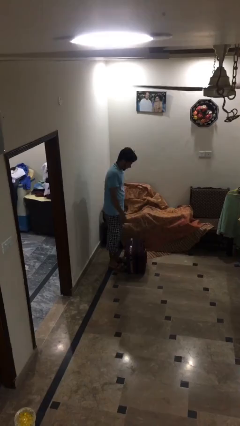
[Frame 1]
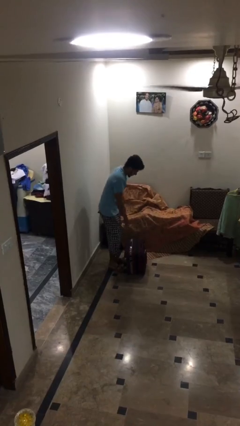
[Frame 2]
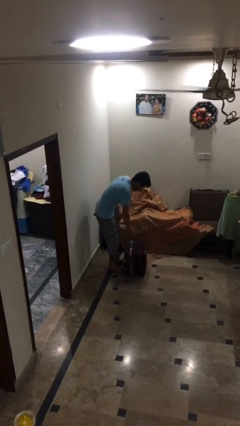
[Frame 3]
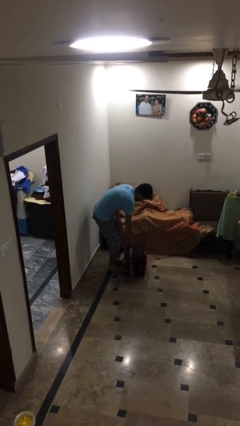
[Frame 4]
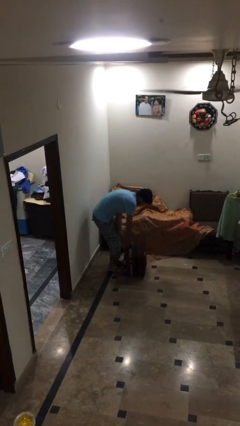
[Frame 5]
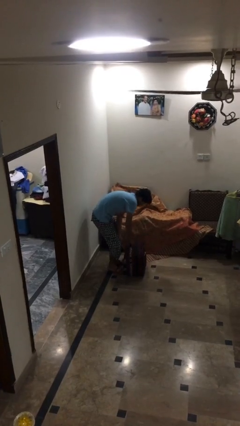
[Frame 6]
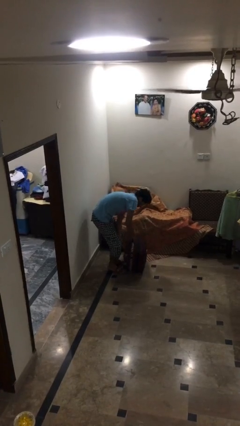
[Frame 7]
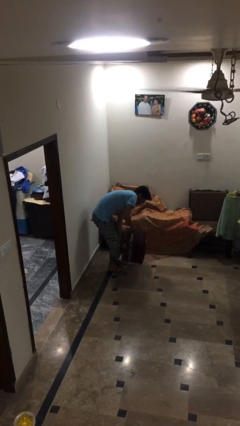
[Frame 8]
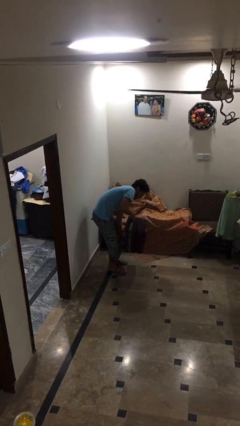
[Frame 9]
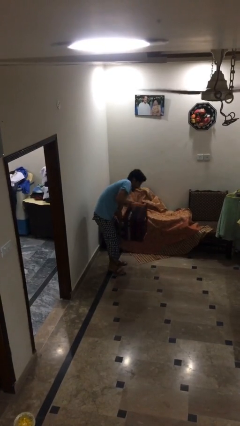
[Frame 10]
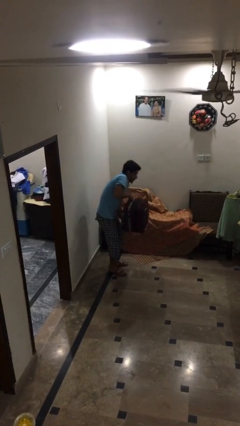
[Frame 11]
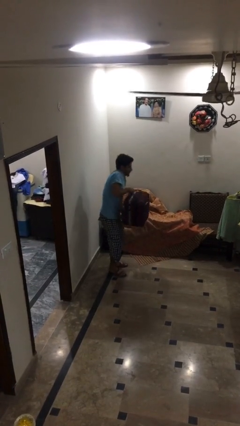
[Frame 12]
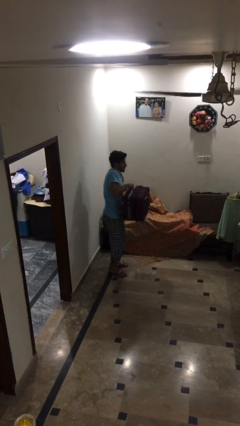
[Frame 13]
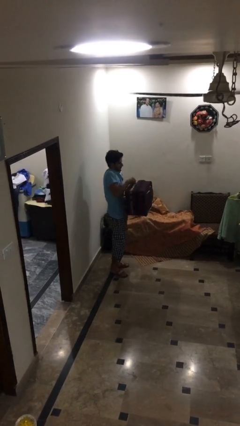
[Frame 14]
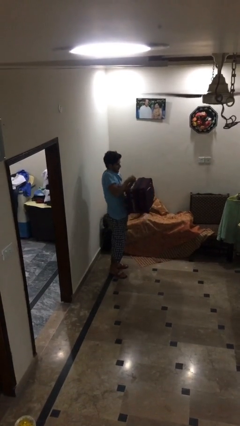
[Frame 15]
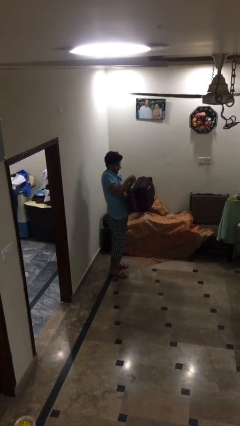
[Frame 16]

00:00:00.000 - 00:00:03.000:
person picks up object from floor

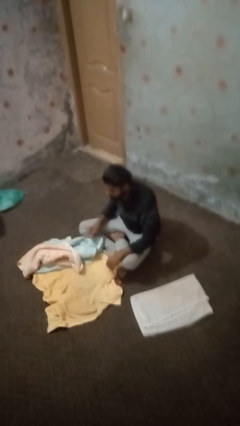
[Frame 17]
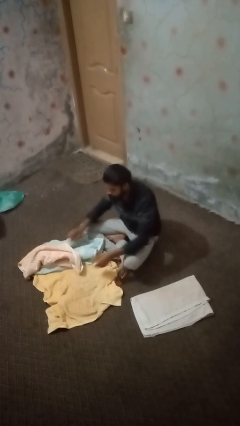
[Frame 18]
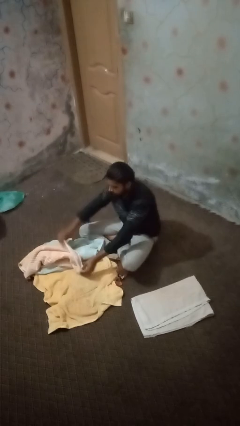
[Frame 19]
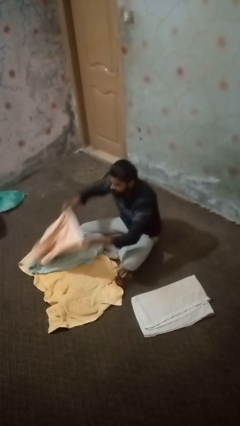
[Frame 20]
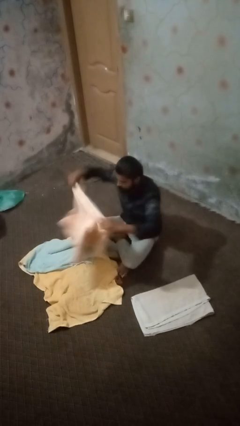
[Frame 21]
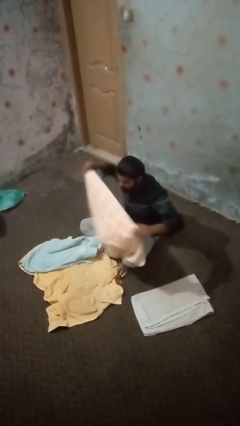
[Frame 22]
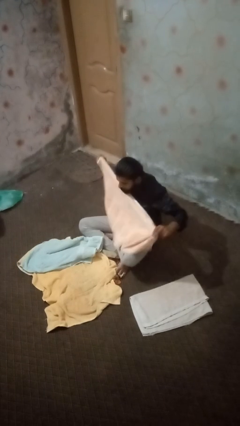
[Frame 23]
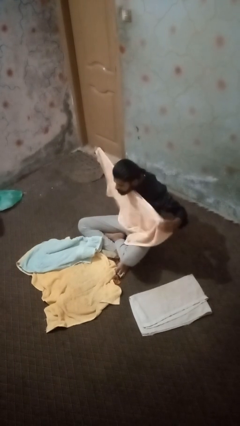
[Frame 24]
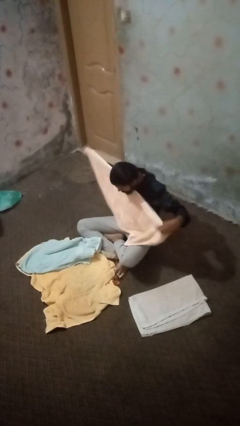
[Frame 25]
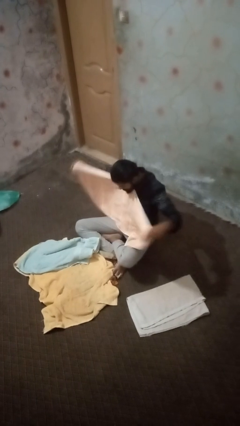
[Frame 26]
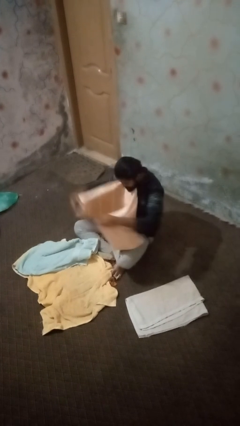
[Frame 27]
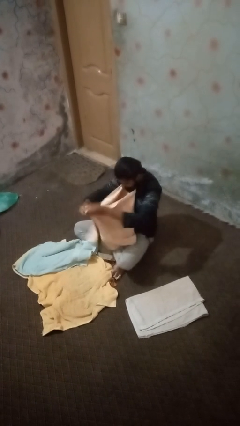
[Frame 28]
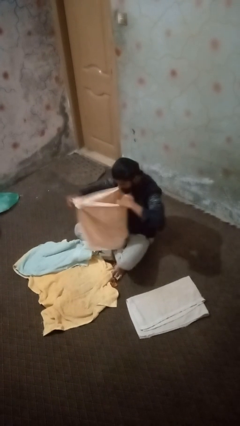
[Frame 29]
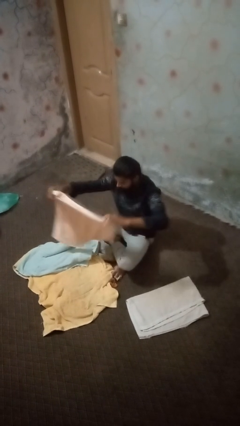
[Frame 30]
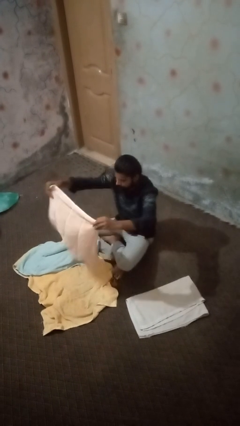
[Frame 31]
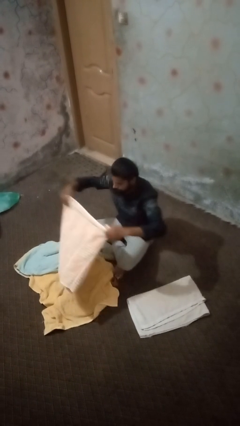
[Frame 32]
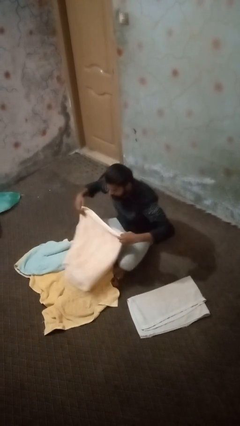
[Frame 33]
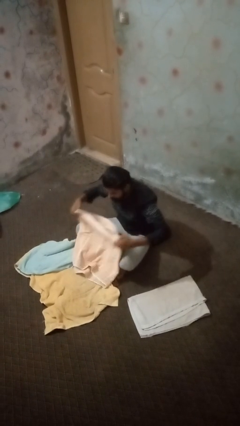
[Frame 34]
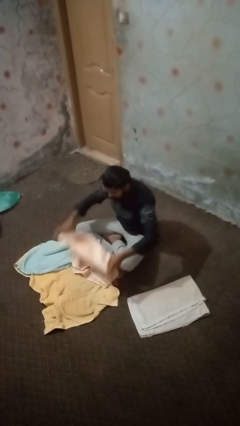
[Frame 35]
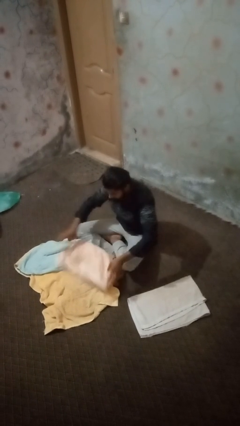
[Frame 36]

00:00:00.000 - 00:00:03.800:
person folds towel

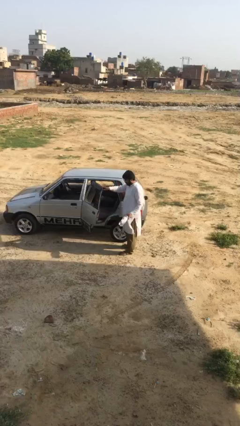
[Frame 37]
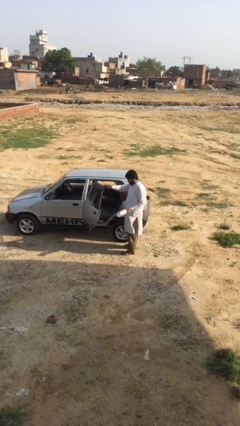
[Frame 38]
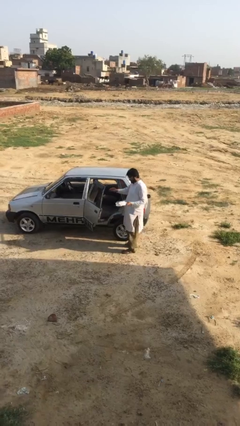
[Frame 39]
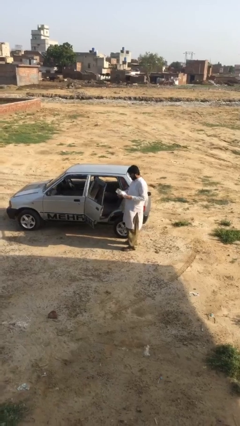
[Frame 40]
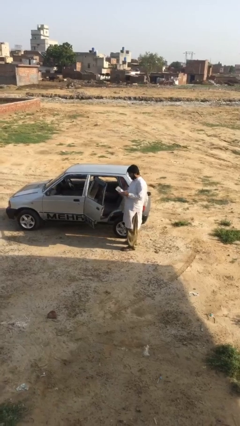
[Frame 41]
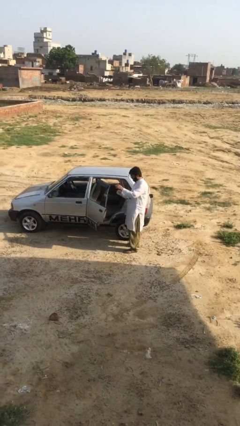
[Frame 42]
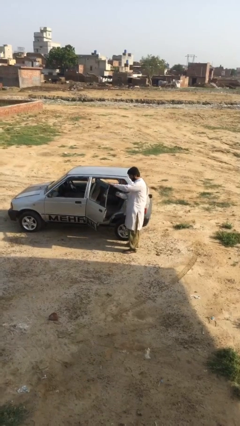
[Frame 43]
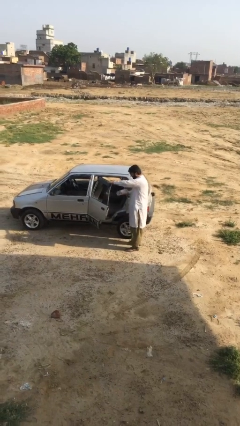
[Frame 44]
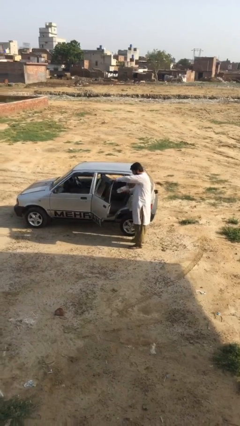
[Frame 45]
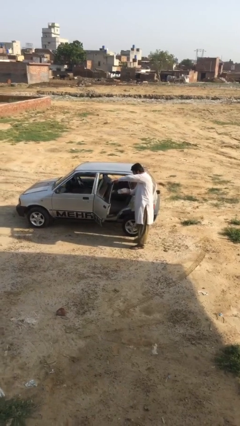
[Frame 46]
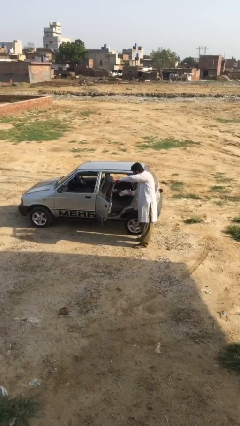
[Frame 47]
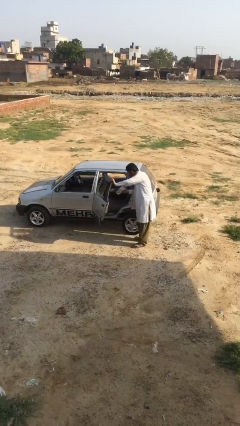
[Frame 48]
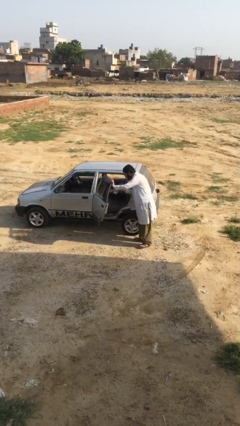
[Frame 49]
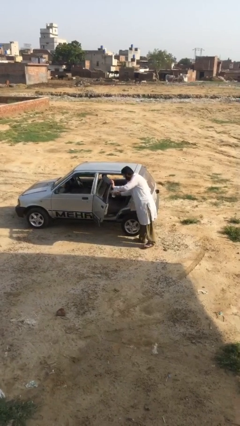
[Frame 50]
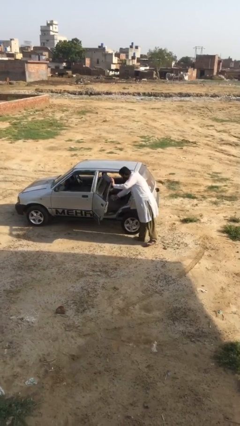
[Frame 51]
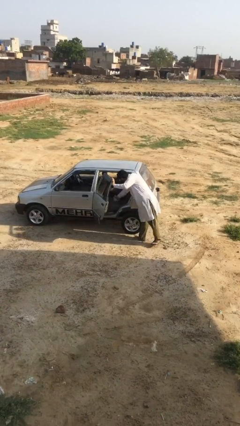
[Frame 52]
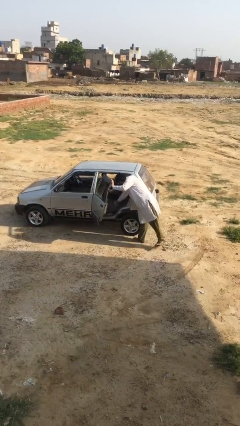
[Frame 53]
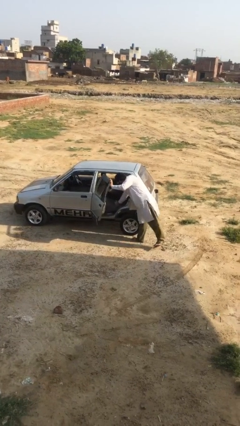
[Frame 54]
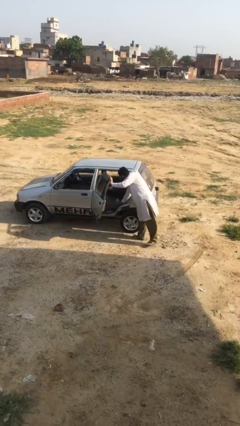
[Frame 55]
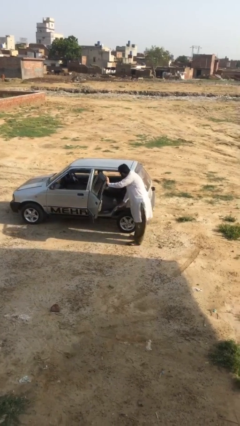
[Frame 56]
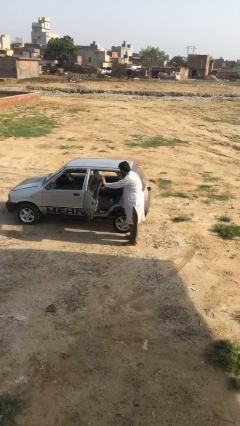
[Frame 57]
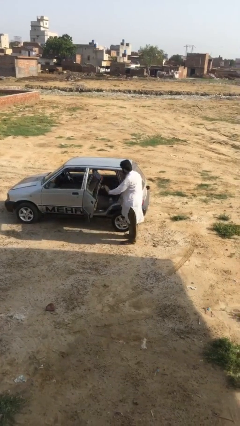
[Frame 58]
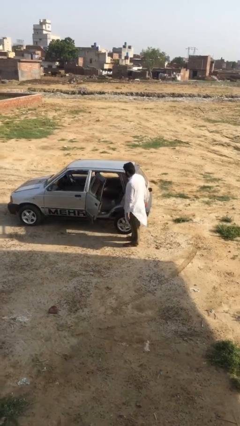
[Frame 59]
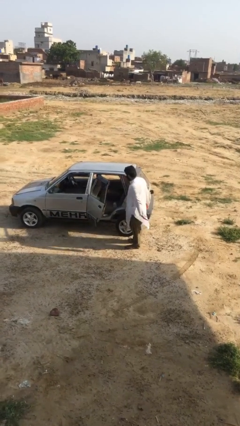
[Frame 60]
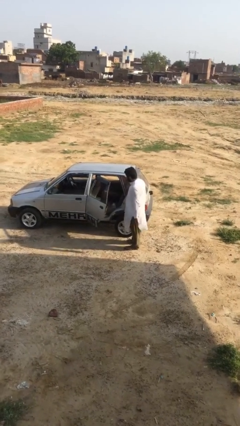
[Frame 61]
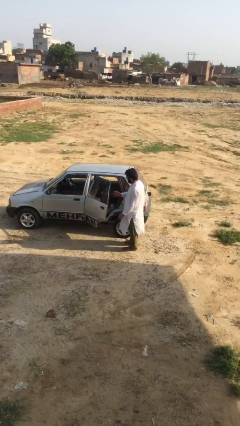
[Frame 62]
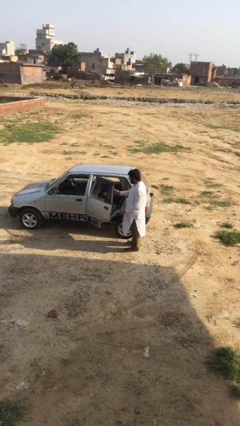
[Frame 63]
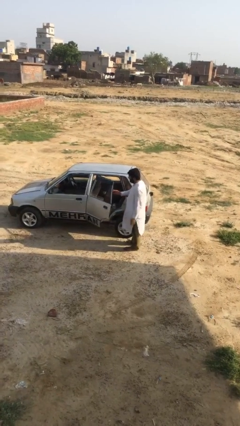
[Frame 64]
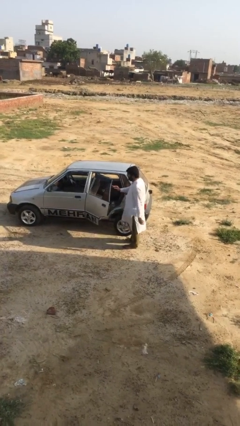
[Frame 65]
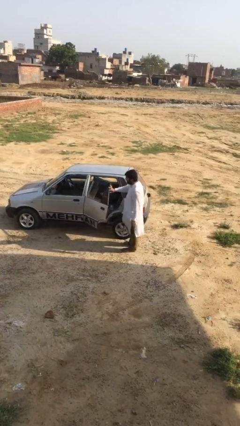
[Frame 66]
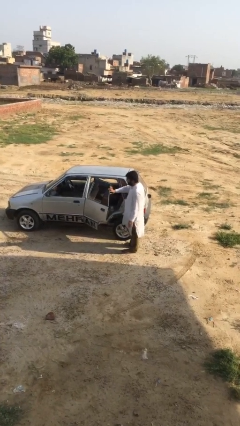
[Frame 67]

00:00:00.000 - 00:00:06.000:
person loads car

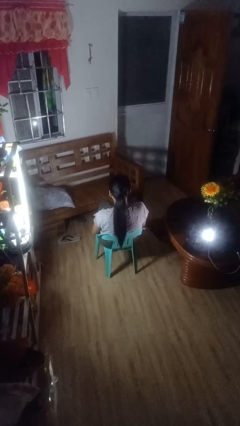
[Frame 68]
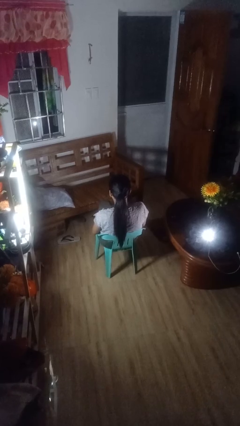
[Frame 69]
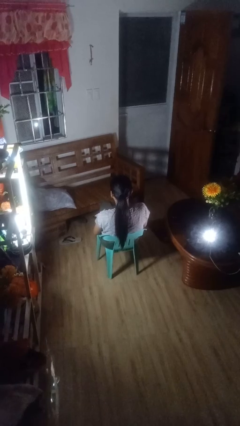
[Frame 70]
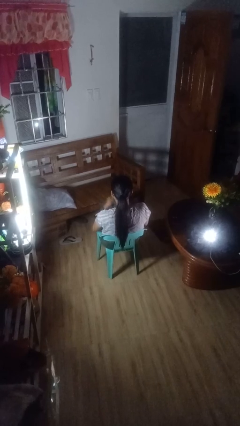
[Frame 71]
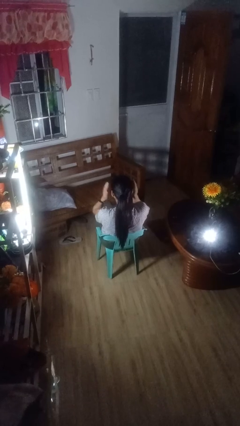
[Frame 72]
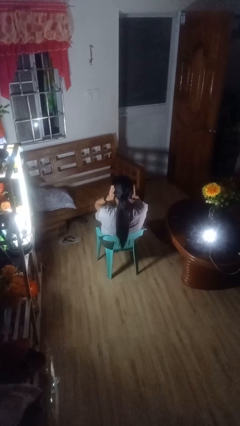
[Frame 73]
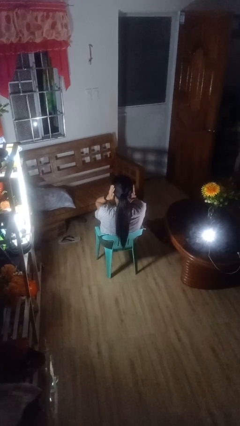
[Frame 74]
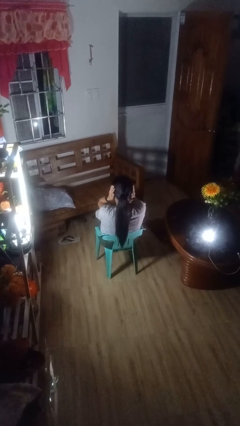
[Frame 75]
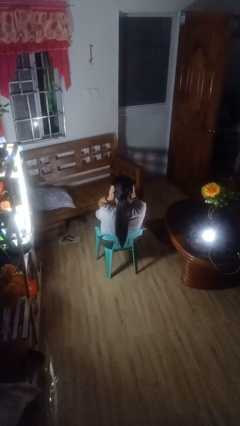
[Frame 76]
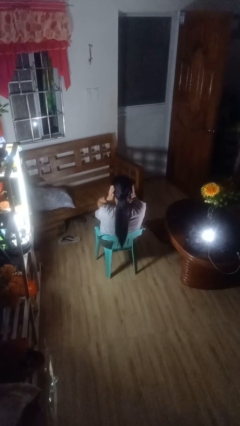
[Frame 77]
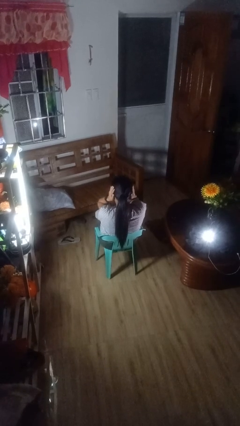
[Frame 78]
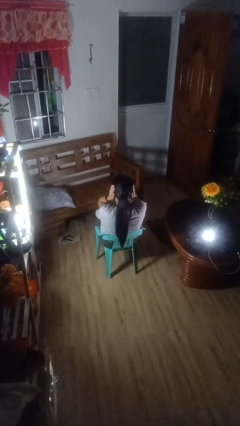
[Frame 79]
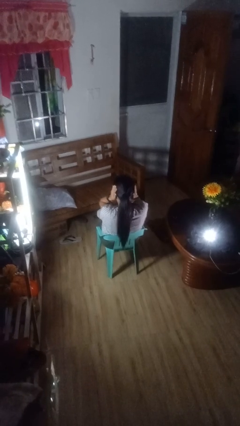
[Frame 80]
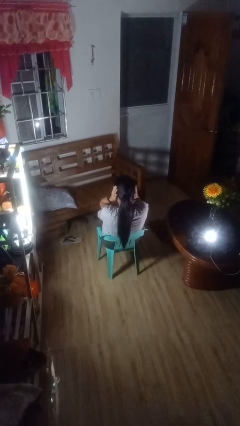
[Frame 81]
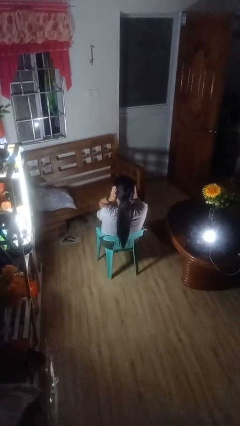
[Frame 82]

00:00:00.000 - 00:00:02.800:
person puts fingers in ear

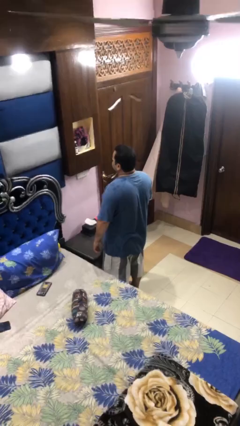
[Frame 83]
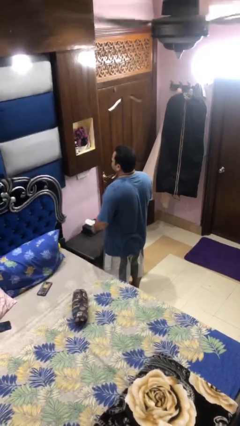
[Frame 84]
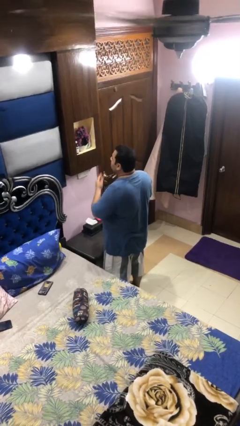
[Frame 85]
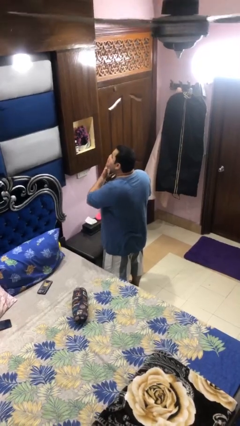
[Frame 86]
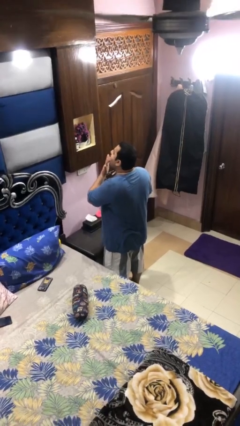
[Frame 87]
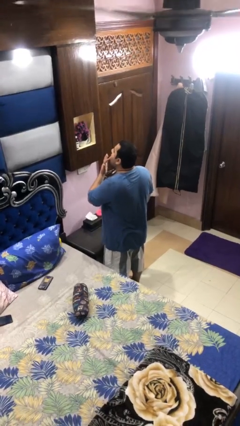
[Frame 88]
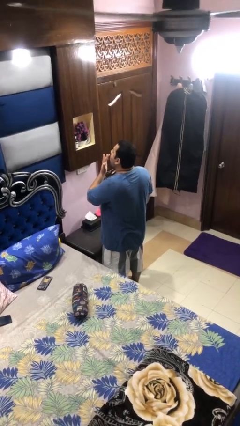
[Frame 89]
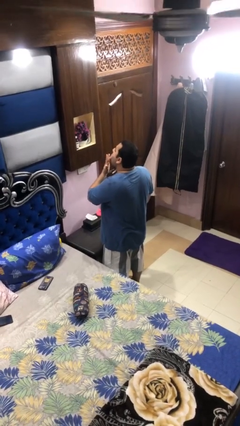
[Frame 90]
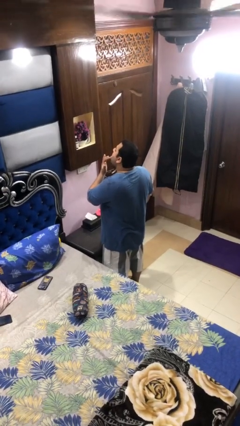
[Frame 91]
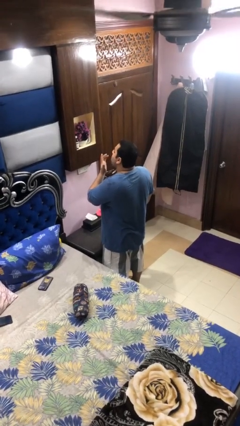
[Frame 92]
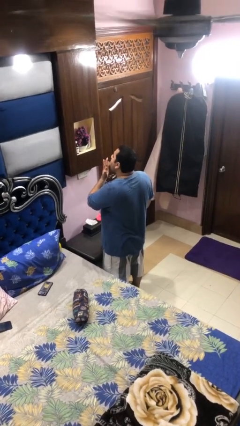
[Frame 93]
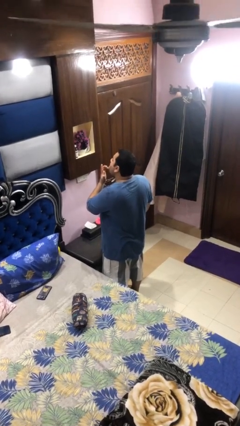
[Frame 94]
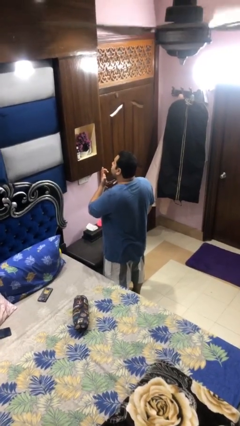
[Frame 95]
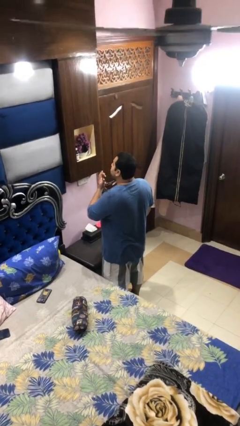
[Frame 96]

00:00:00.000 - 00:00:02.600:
person licks fingers
